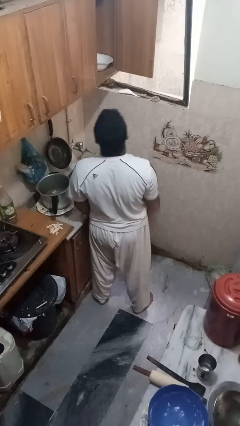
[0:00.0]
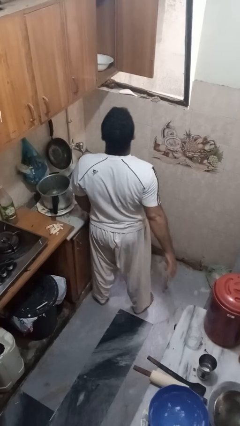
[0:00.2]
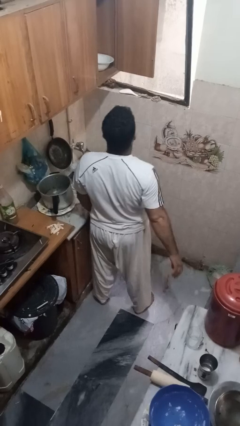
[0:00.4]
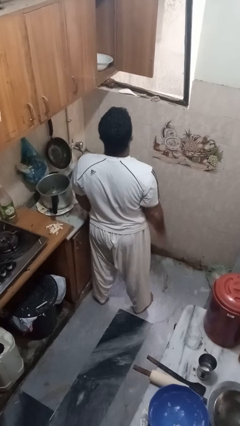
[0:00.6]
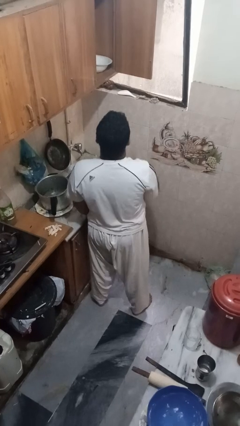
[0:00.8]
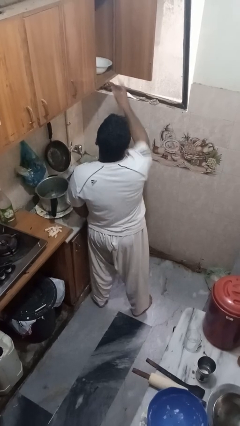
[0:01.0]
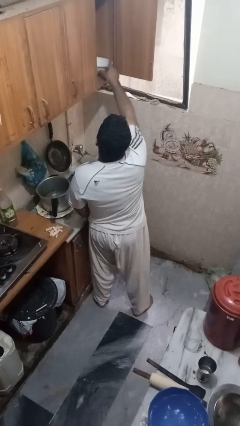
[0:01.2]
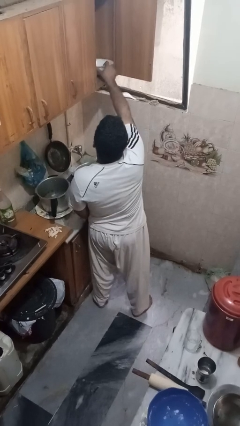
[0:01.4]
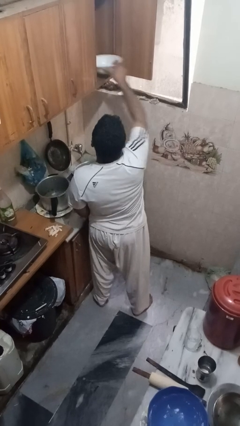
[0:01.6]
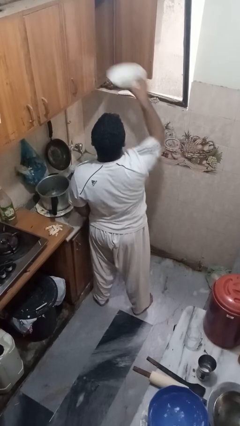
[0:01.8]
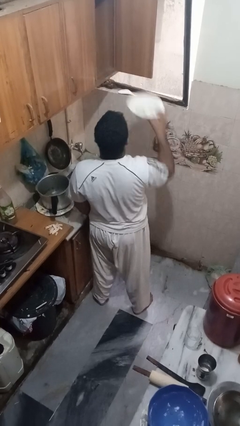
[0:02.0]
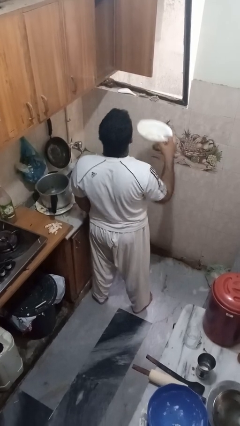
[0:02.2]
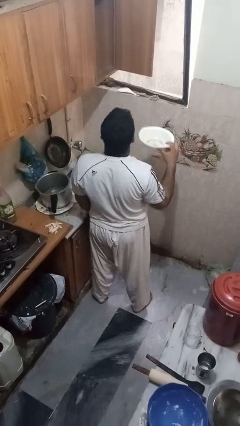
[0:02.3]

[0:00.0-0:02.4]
person takes object from cabinet

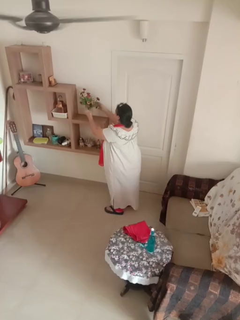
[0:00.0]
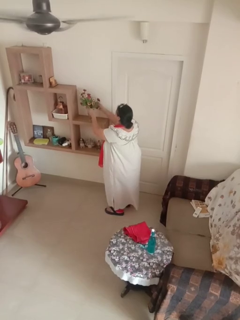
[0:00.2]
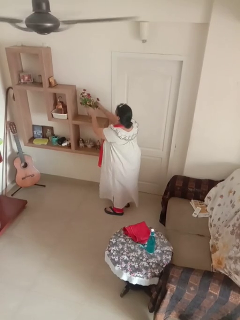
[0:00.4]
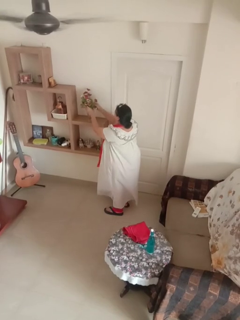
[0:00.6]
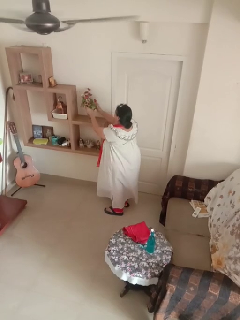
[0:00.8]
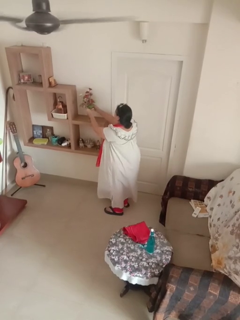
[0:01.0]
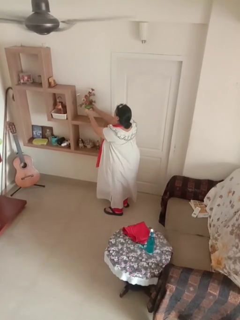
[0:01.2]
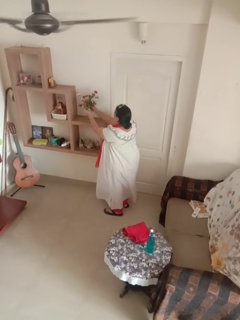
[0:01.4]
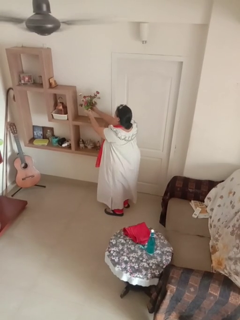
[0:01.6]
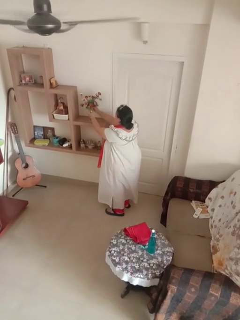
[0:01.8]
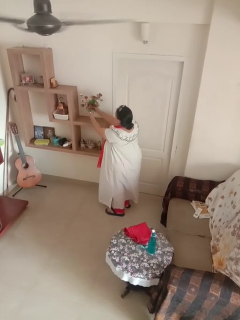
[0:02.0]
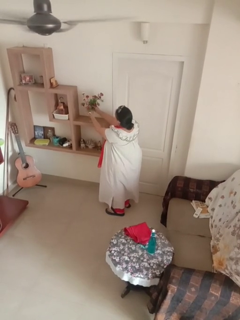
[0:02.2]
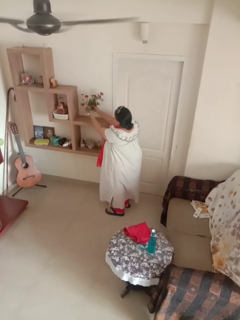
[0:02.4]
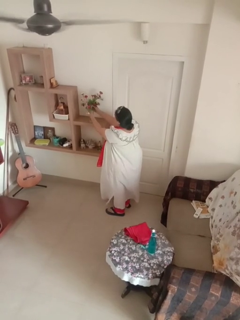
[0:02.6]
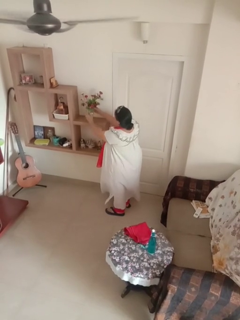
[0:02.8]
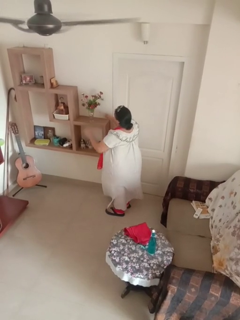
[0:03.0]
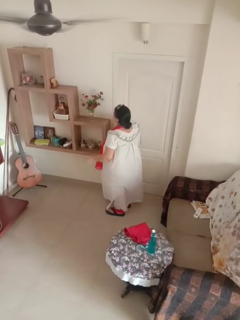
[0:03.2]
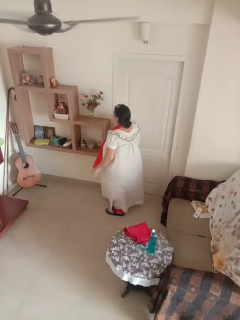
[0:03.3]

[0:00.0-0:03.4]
person arranges flowers in vase

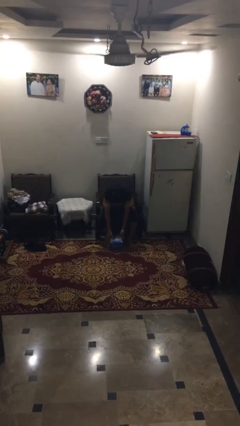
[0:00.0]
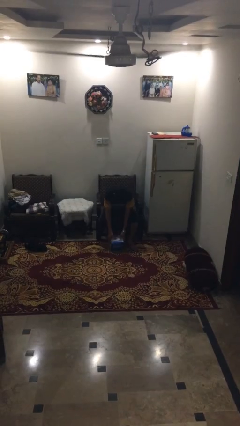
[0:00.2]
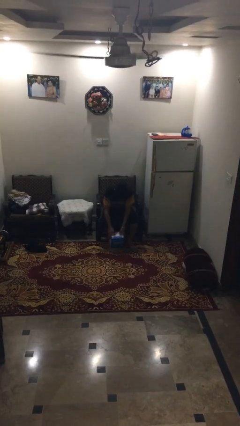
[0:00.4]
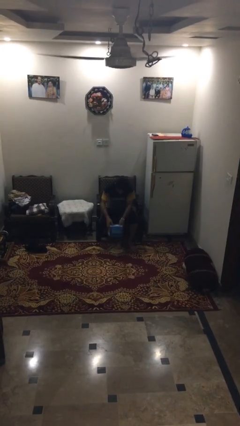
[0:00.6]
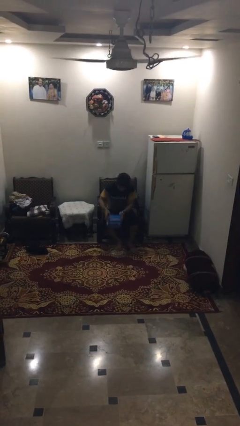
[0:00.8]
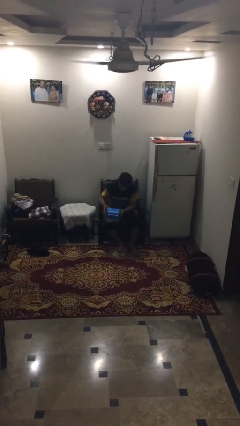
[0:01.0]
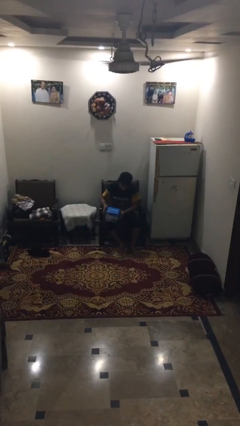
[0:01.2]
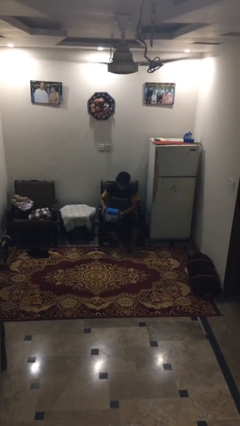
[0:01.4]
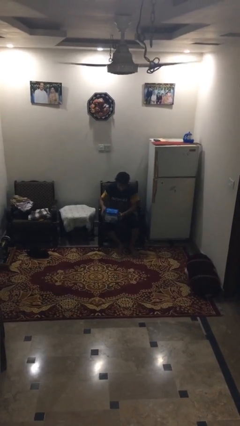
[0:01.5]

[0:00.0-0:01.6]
person picks up object from floor

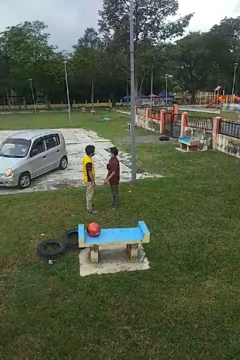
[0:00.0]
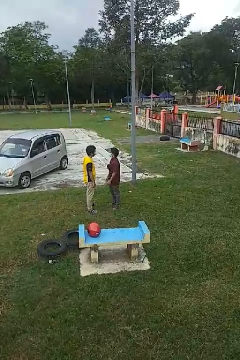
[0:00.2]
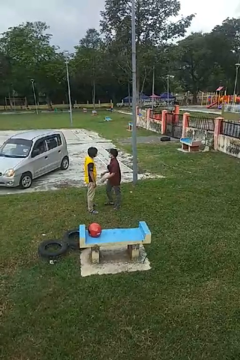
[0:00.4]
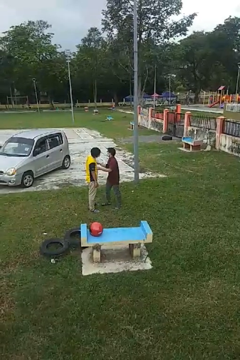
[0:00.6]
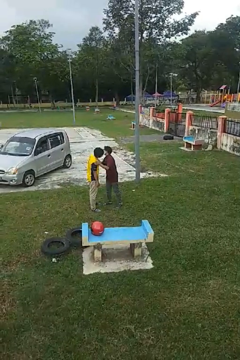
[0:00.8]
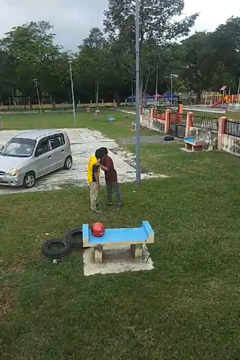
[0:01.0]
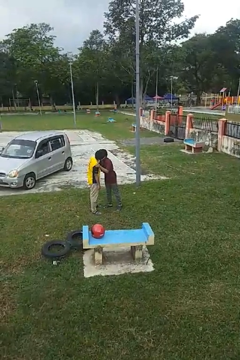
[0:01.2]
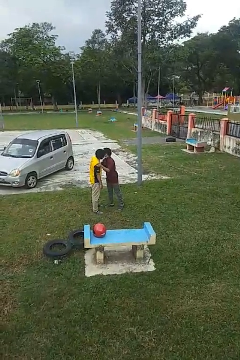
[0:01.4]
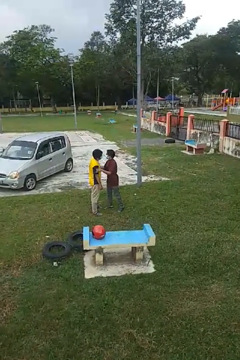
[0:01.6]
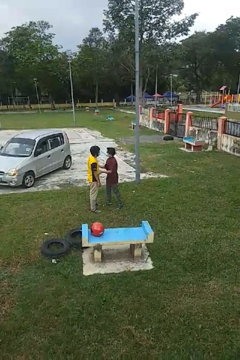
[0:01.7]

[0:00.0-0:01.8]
person kisses cheek of person

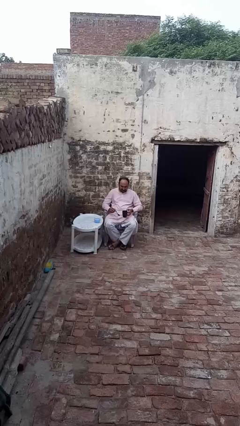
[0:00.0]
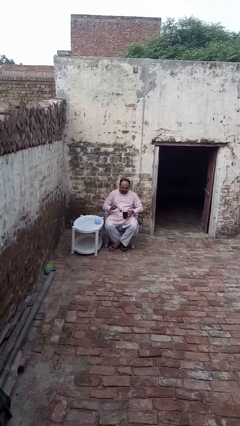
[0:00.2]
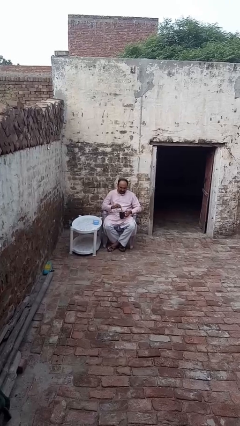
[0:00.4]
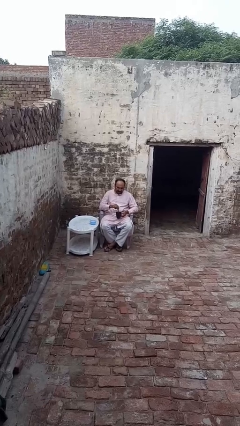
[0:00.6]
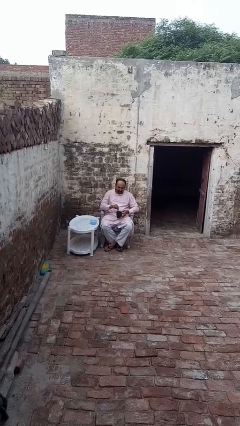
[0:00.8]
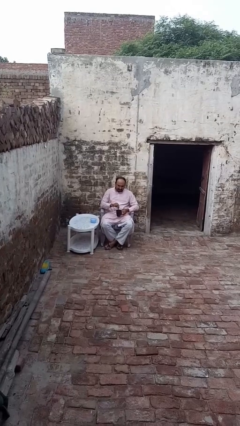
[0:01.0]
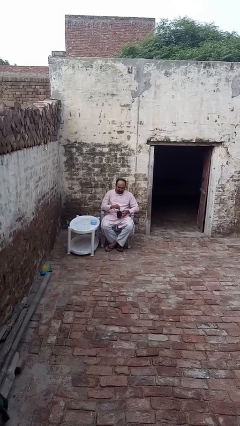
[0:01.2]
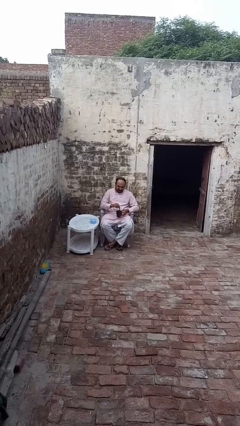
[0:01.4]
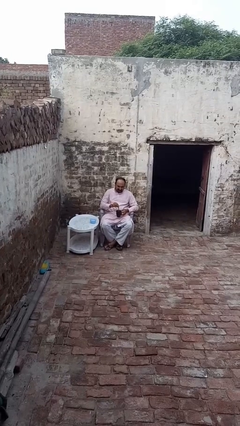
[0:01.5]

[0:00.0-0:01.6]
person stirs mug

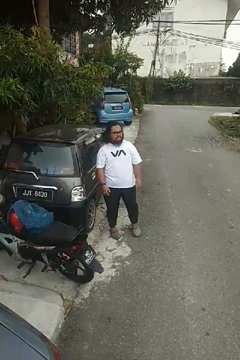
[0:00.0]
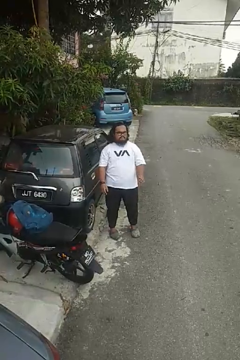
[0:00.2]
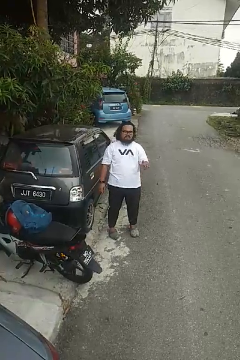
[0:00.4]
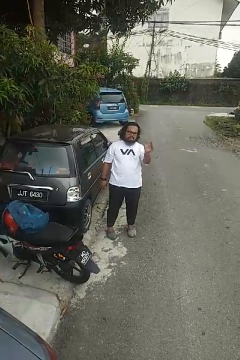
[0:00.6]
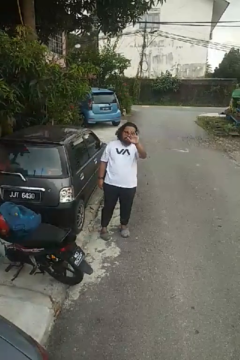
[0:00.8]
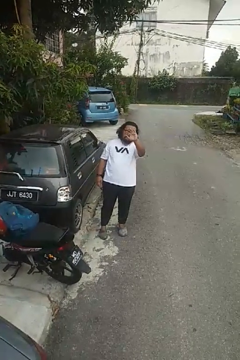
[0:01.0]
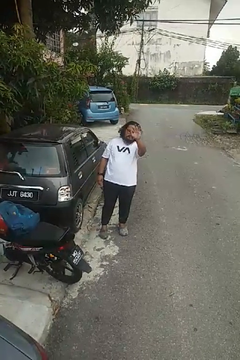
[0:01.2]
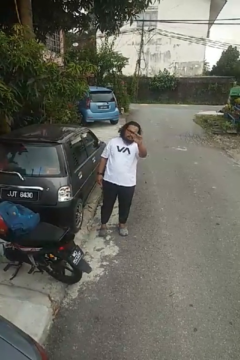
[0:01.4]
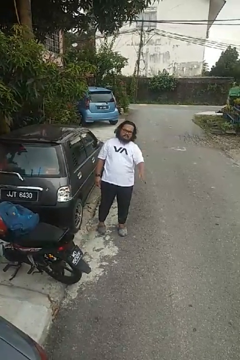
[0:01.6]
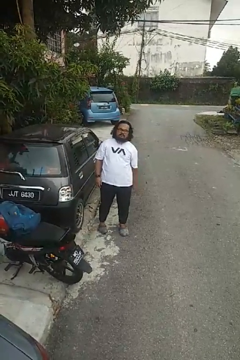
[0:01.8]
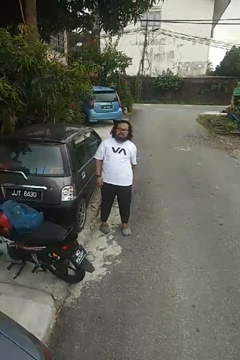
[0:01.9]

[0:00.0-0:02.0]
person waves at person

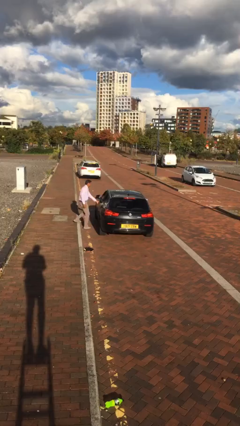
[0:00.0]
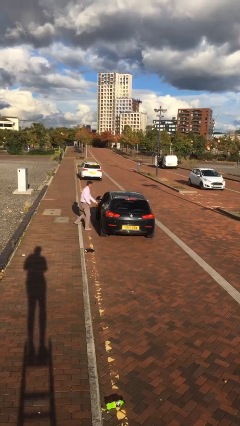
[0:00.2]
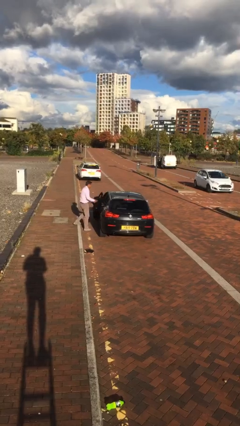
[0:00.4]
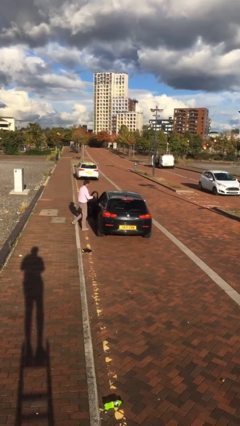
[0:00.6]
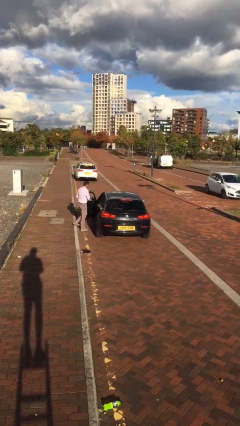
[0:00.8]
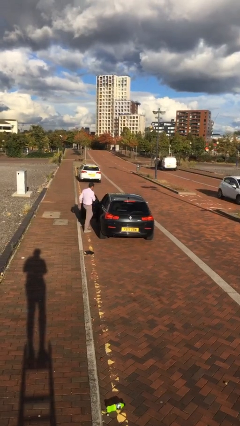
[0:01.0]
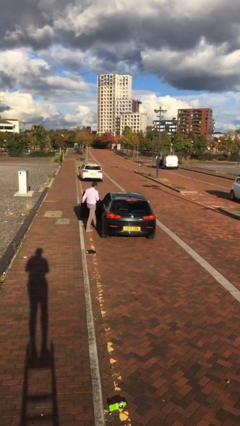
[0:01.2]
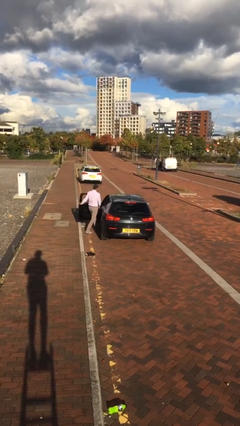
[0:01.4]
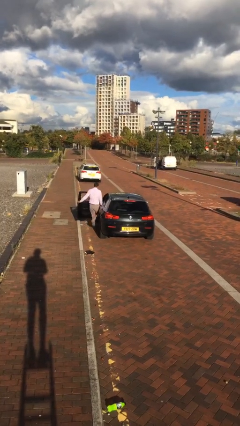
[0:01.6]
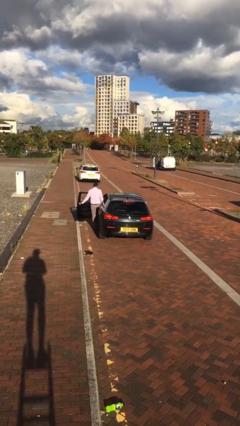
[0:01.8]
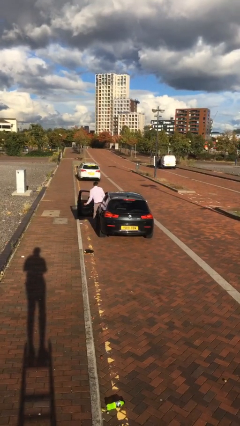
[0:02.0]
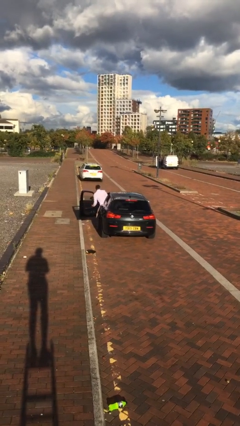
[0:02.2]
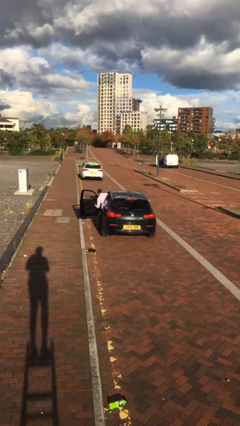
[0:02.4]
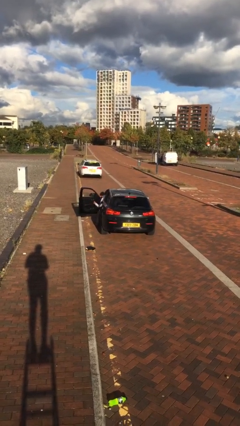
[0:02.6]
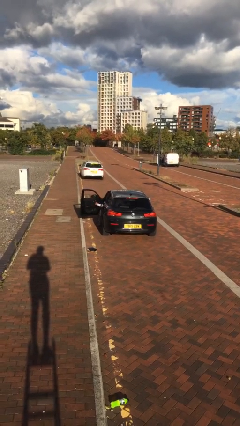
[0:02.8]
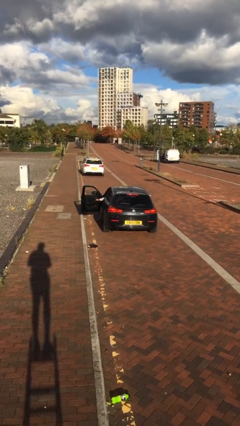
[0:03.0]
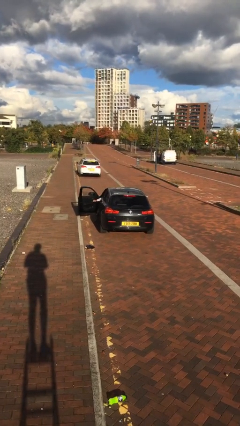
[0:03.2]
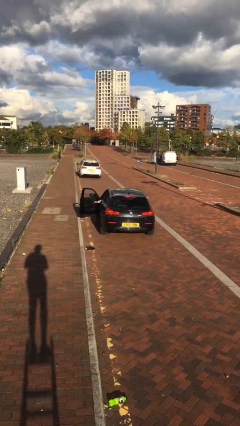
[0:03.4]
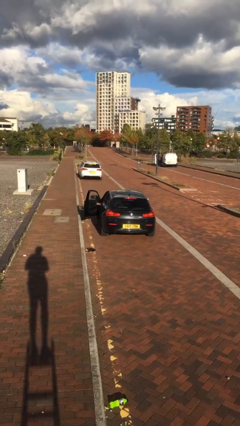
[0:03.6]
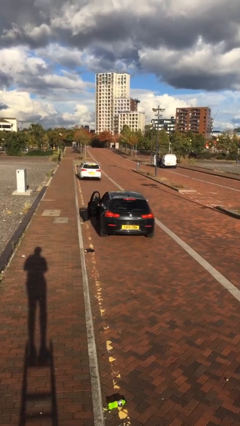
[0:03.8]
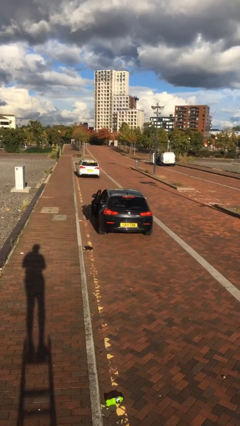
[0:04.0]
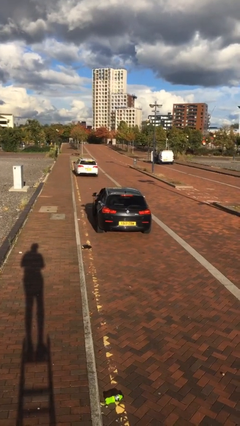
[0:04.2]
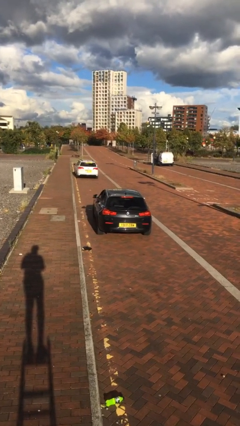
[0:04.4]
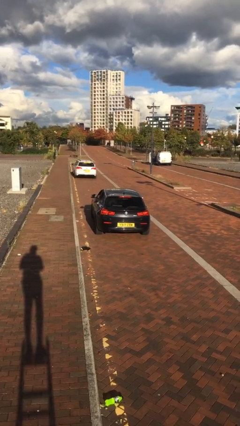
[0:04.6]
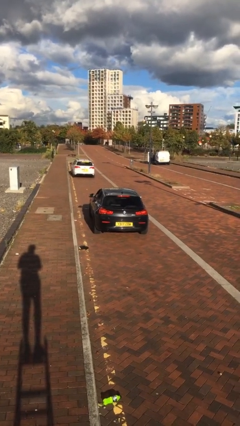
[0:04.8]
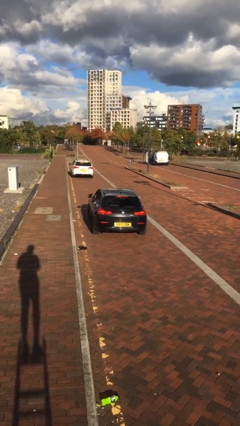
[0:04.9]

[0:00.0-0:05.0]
car picks up person

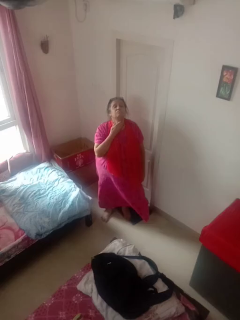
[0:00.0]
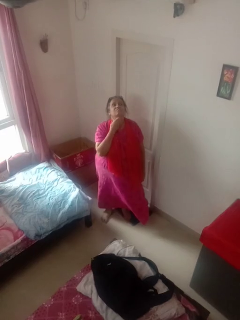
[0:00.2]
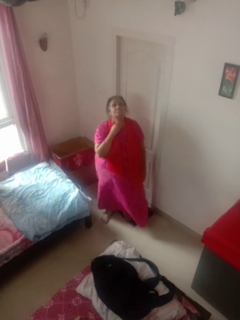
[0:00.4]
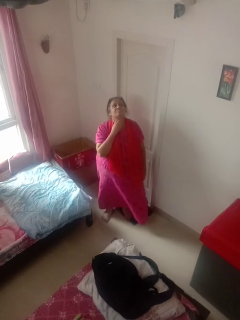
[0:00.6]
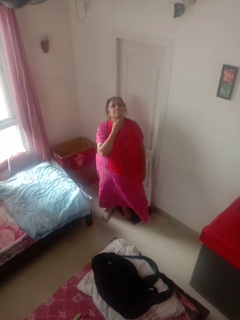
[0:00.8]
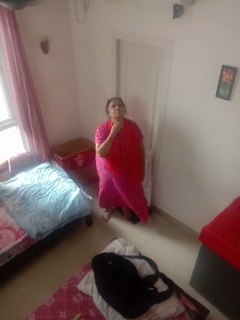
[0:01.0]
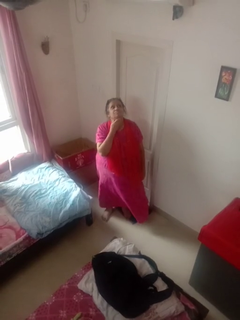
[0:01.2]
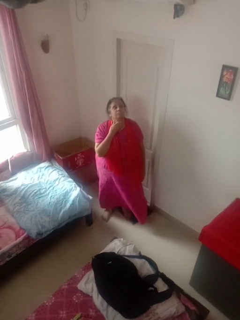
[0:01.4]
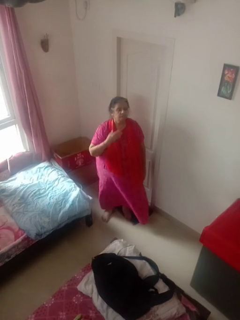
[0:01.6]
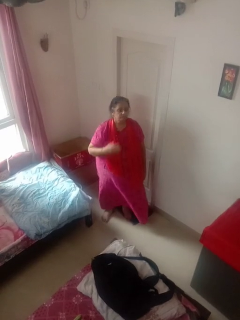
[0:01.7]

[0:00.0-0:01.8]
person rubs neck
